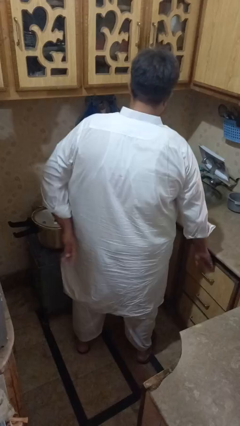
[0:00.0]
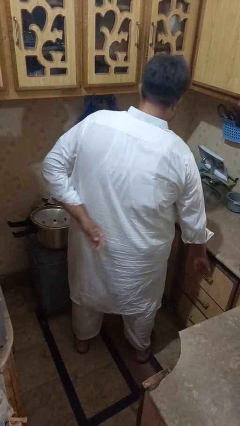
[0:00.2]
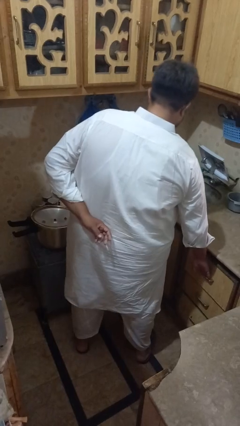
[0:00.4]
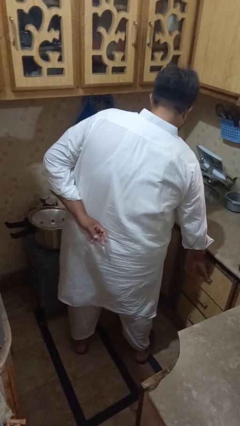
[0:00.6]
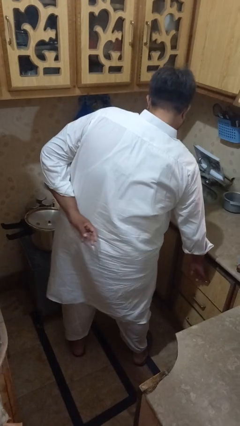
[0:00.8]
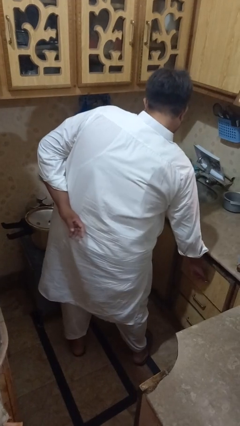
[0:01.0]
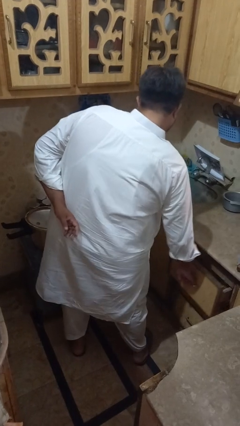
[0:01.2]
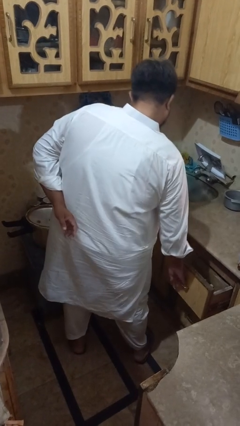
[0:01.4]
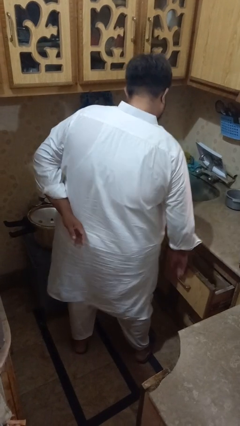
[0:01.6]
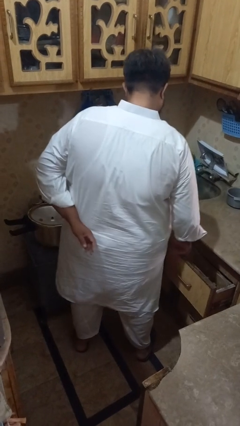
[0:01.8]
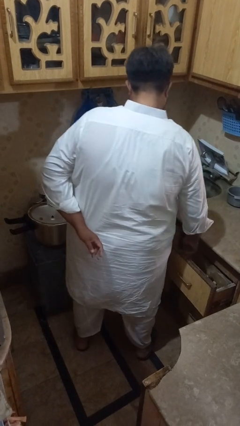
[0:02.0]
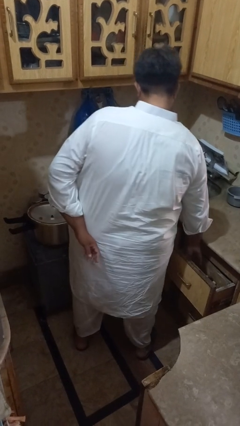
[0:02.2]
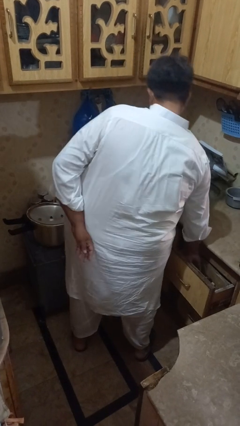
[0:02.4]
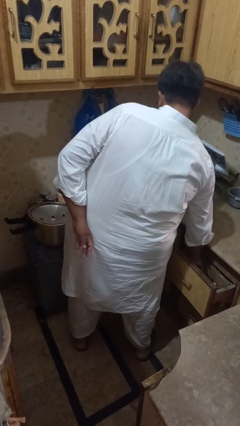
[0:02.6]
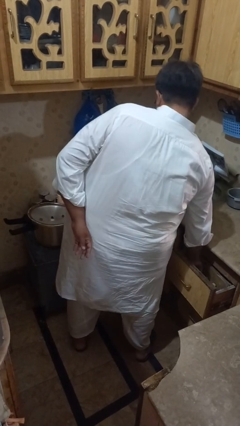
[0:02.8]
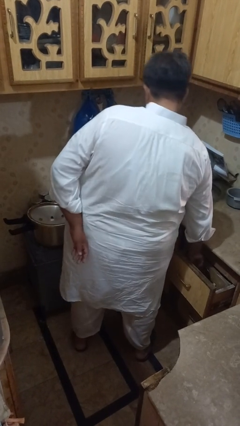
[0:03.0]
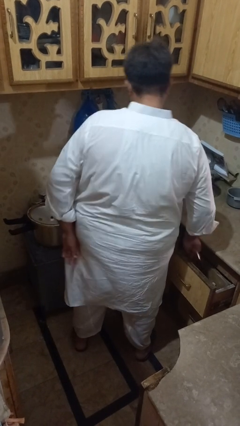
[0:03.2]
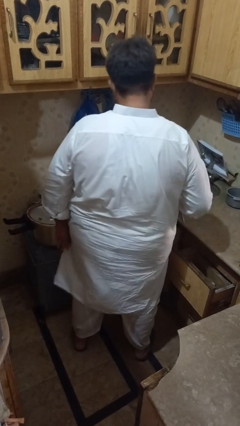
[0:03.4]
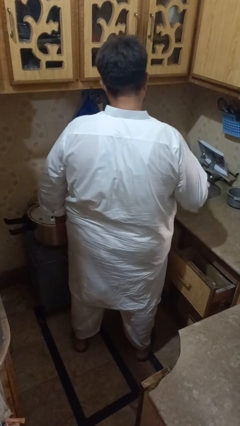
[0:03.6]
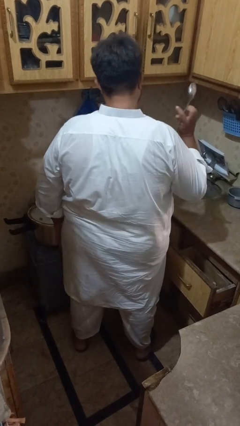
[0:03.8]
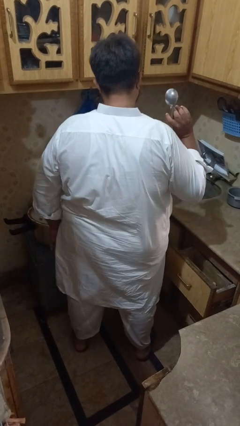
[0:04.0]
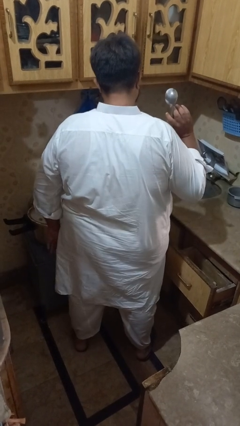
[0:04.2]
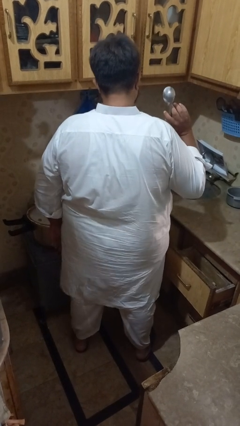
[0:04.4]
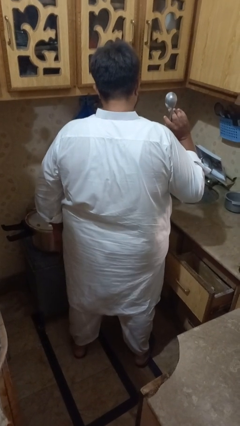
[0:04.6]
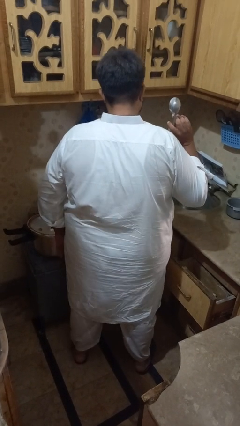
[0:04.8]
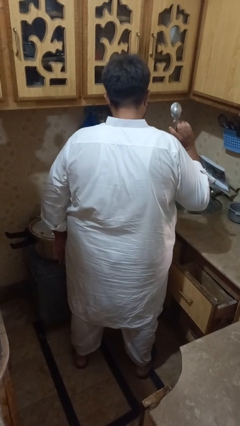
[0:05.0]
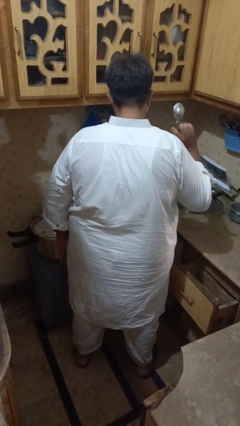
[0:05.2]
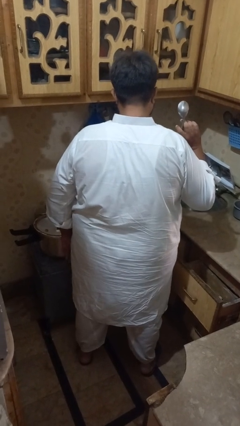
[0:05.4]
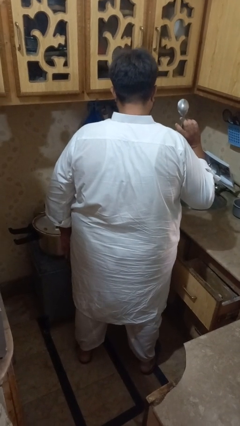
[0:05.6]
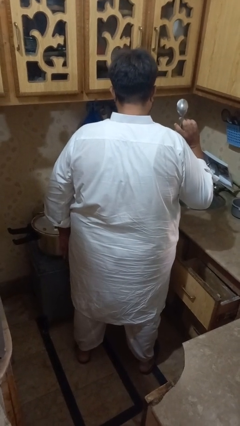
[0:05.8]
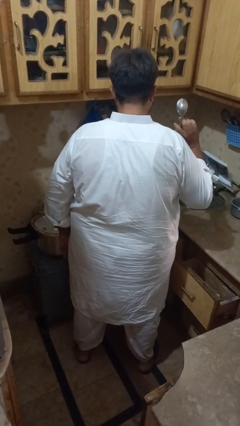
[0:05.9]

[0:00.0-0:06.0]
person takes object from kitchen drawer

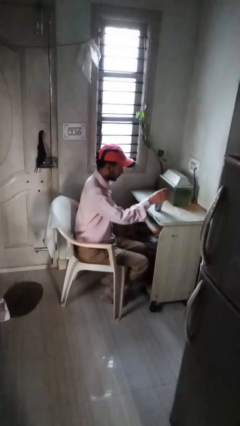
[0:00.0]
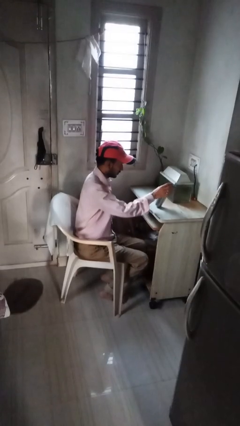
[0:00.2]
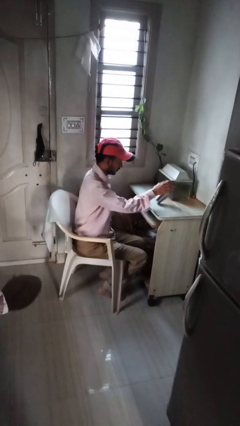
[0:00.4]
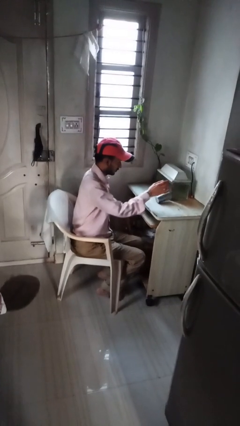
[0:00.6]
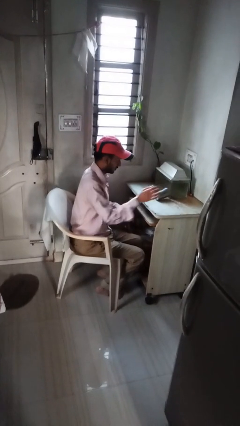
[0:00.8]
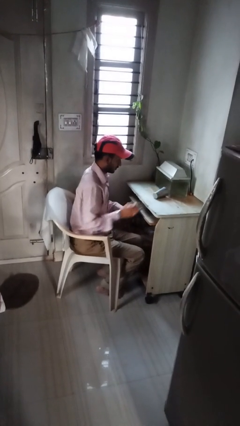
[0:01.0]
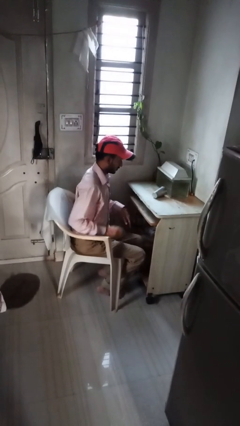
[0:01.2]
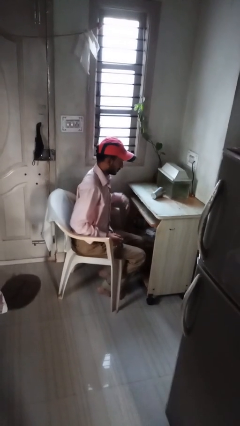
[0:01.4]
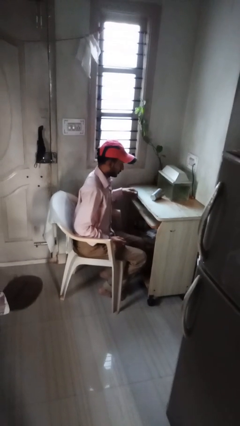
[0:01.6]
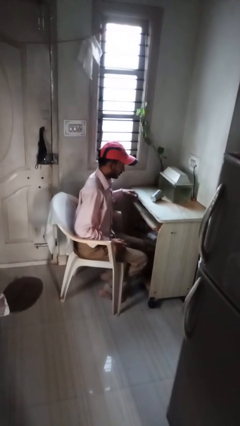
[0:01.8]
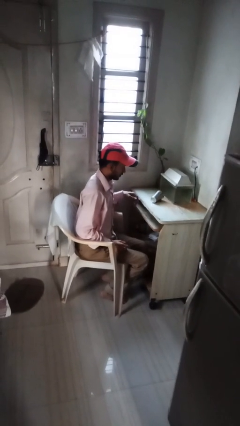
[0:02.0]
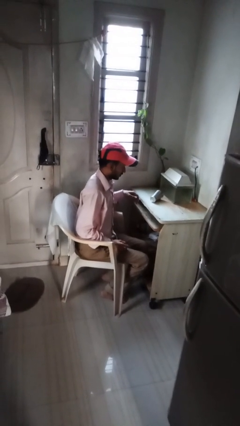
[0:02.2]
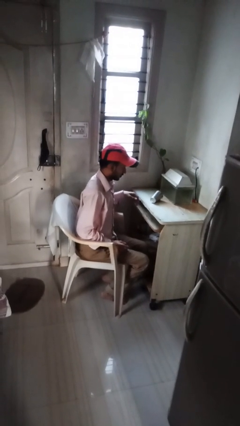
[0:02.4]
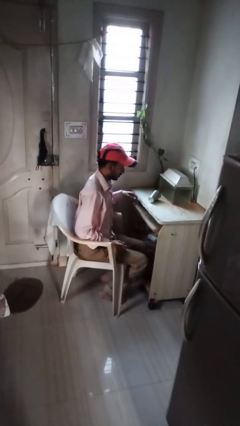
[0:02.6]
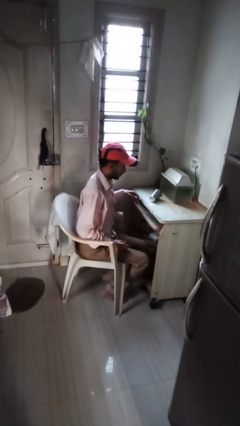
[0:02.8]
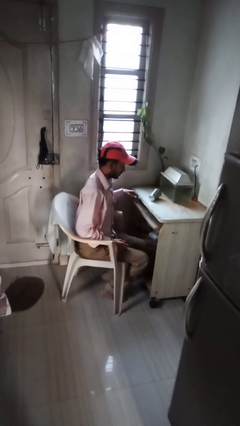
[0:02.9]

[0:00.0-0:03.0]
person knocks over glass

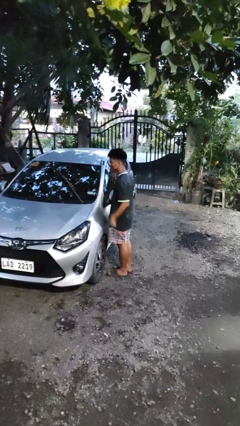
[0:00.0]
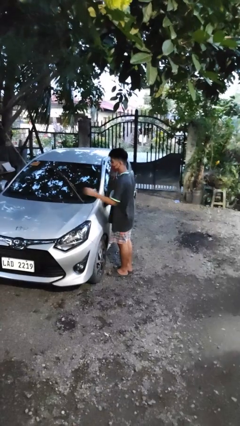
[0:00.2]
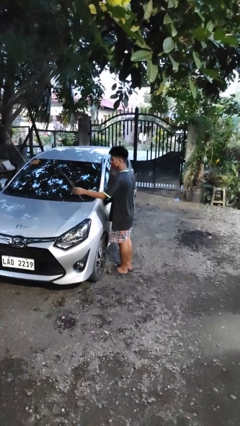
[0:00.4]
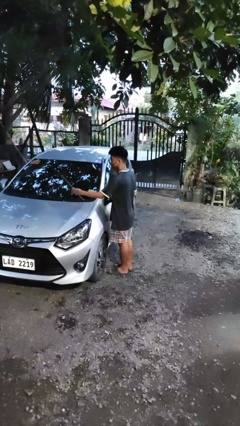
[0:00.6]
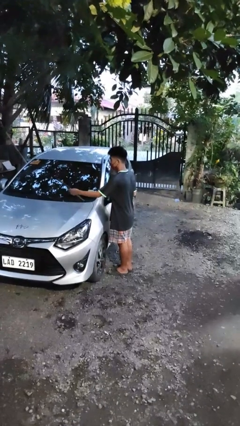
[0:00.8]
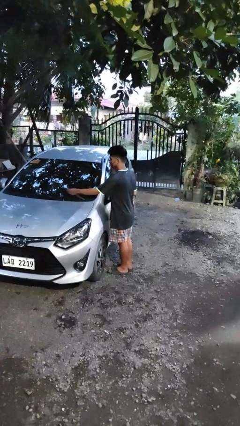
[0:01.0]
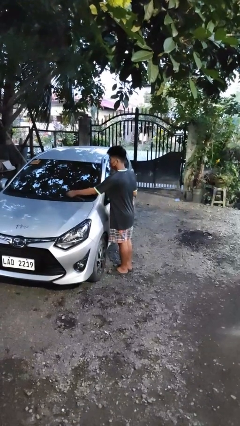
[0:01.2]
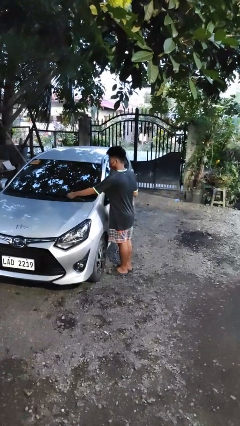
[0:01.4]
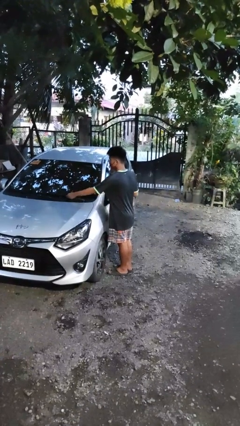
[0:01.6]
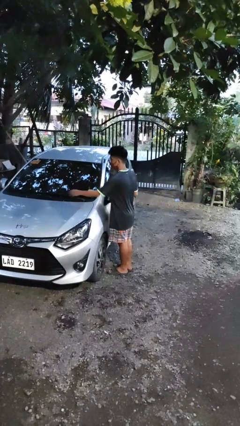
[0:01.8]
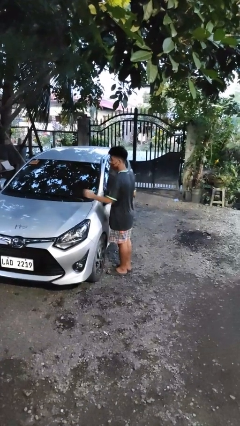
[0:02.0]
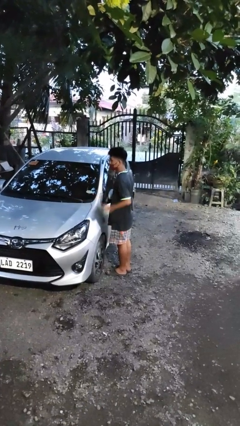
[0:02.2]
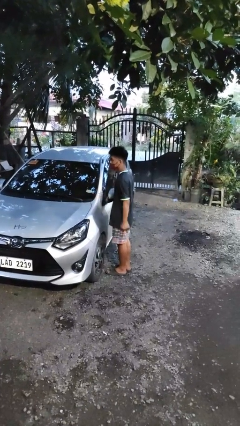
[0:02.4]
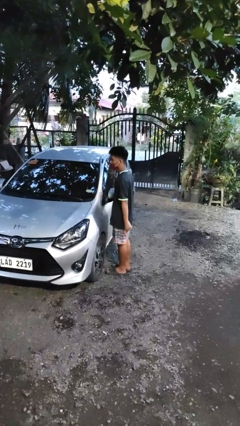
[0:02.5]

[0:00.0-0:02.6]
person flips down car wipers

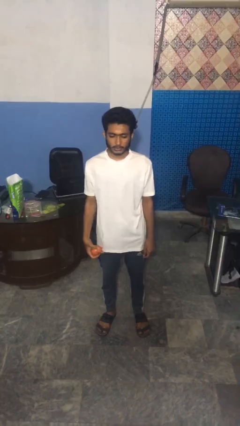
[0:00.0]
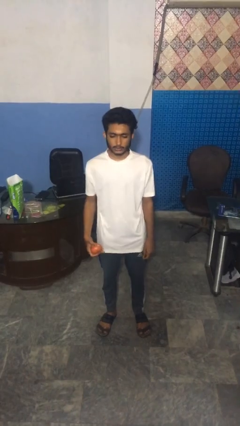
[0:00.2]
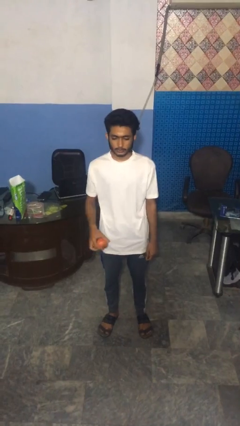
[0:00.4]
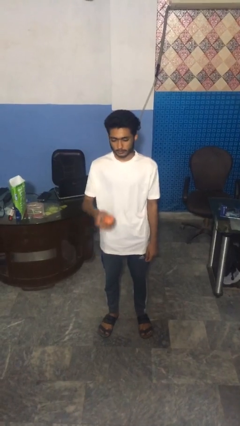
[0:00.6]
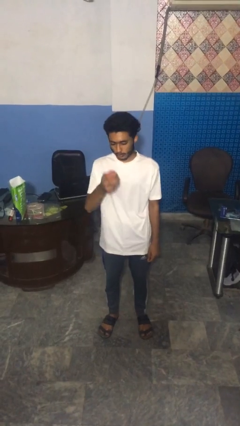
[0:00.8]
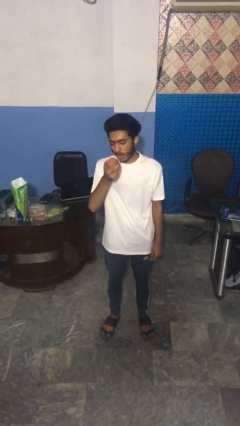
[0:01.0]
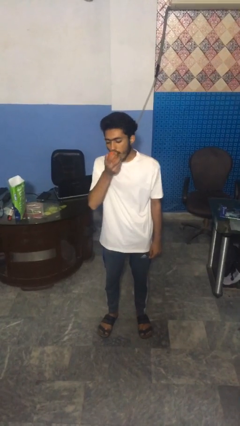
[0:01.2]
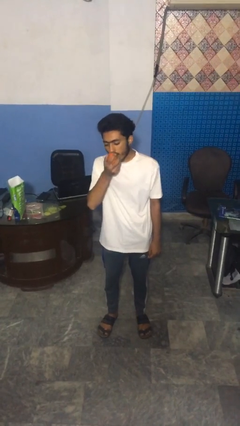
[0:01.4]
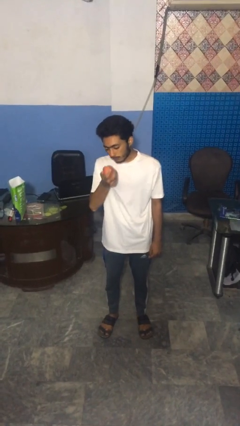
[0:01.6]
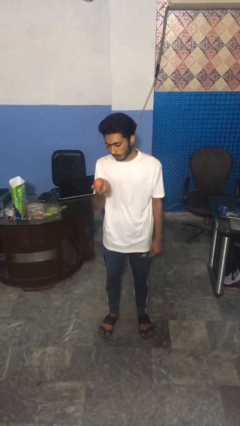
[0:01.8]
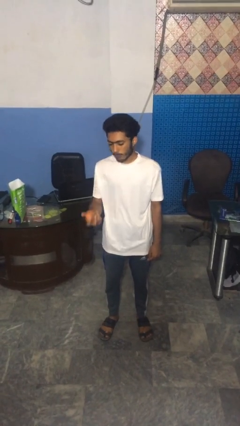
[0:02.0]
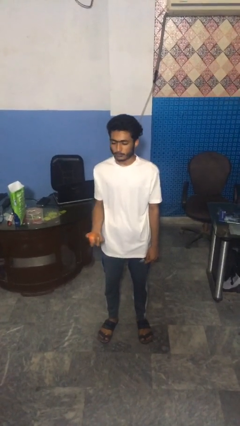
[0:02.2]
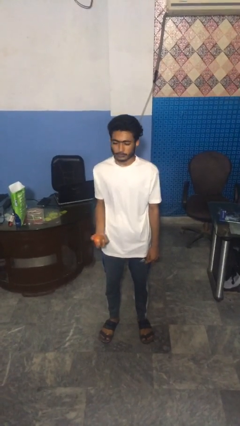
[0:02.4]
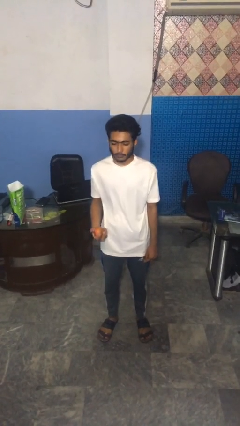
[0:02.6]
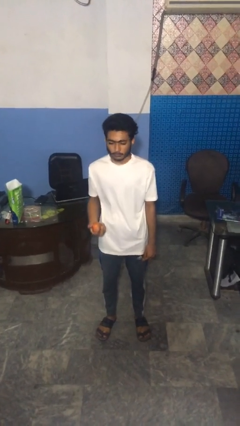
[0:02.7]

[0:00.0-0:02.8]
person eats apple

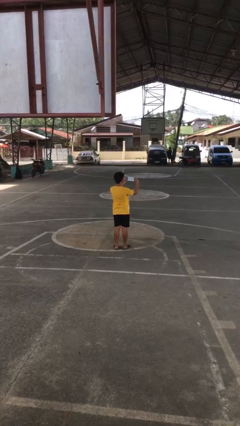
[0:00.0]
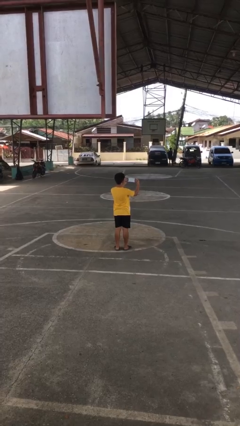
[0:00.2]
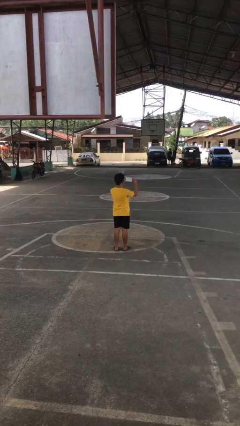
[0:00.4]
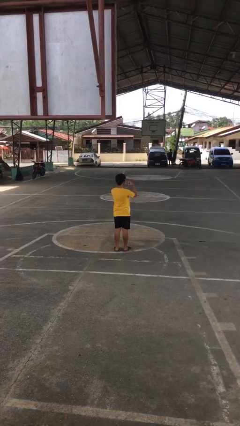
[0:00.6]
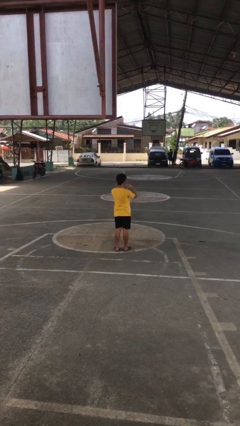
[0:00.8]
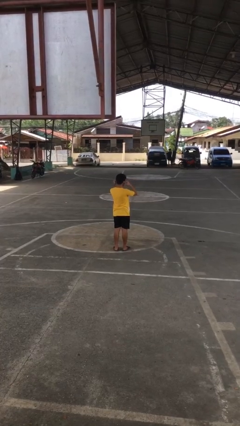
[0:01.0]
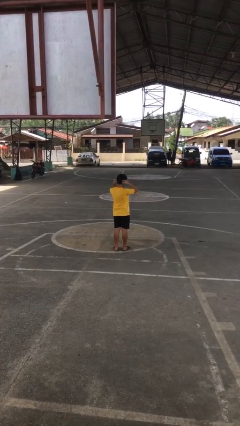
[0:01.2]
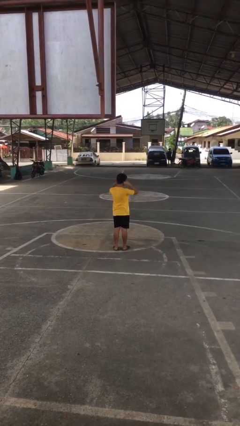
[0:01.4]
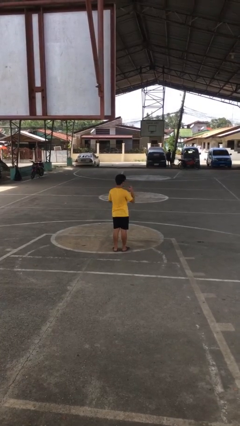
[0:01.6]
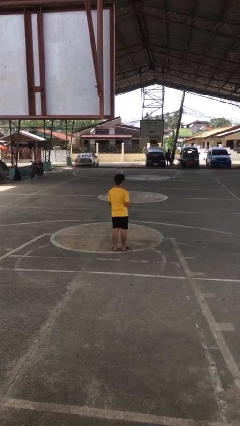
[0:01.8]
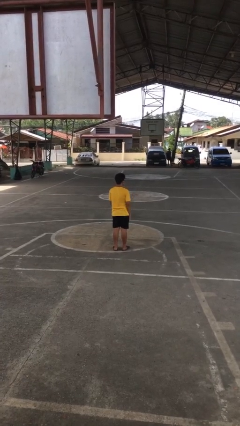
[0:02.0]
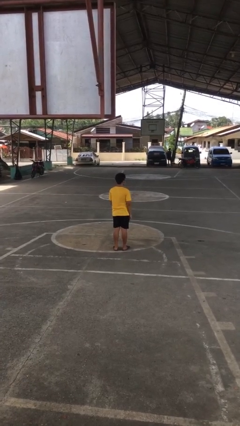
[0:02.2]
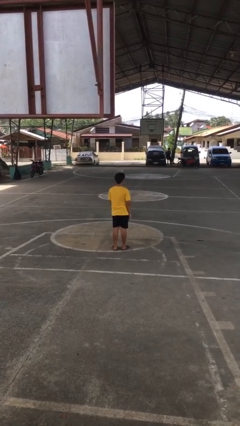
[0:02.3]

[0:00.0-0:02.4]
person puts on facemask

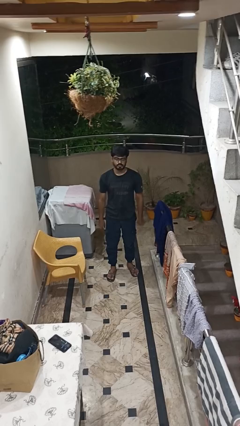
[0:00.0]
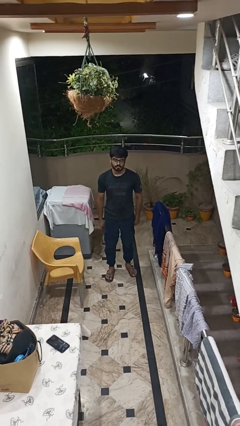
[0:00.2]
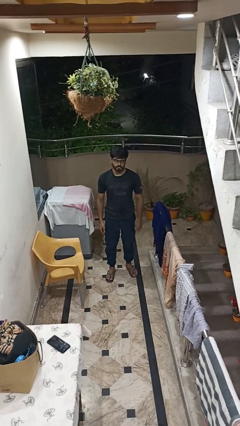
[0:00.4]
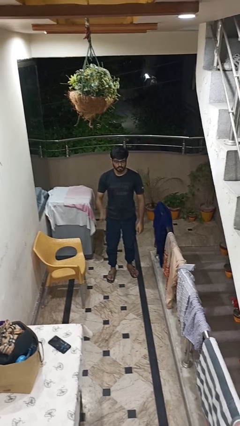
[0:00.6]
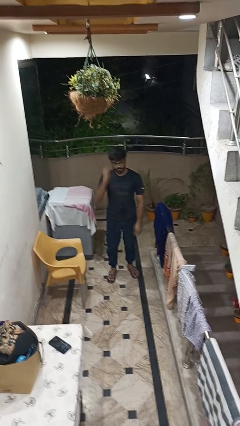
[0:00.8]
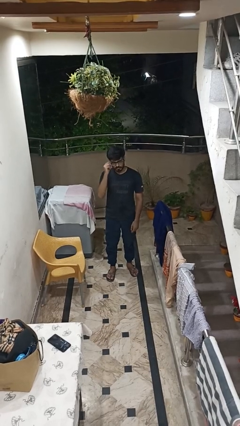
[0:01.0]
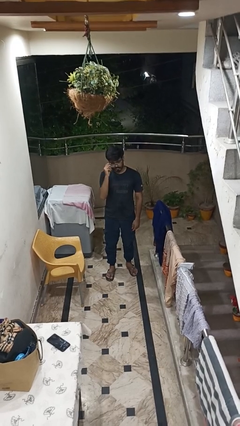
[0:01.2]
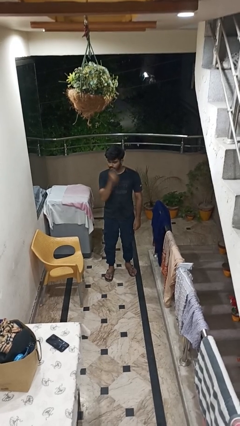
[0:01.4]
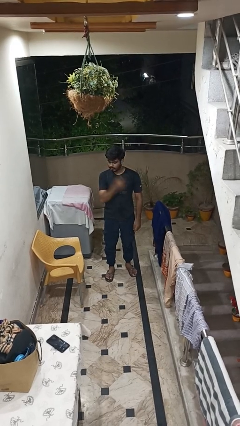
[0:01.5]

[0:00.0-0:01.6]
person takes off glasses
